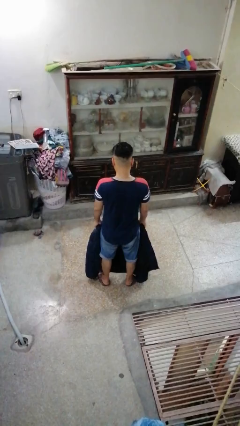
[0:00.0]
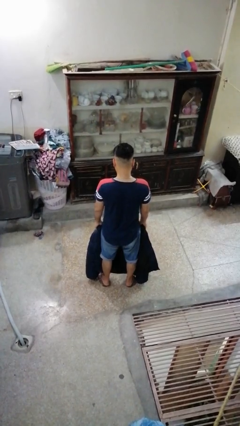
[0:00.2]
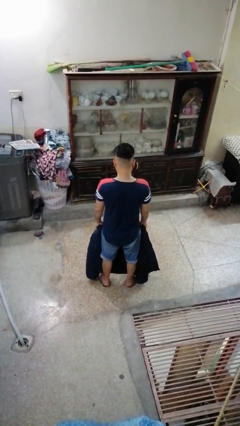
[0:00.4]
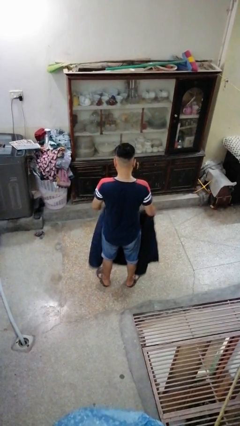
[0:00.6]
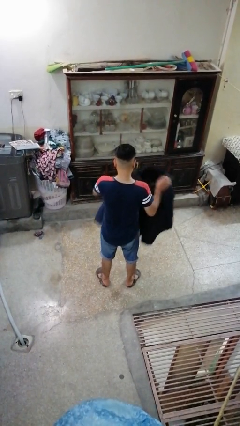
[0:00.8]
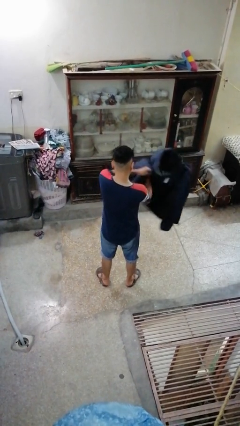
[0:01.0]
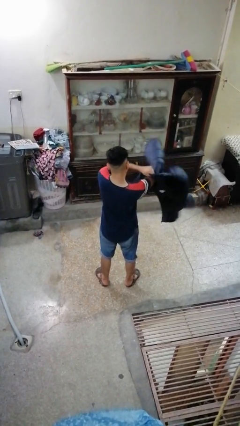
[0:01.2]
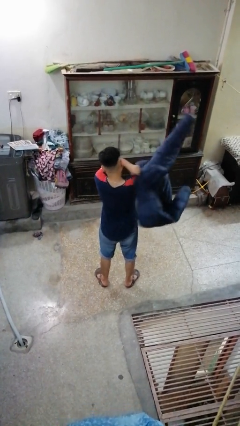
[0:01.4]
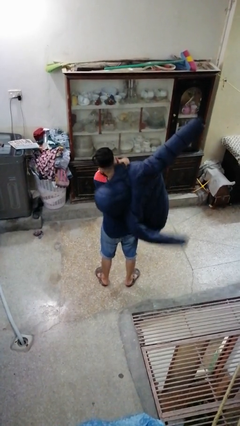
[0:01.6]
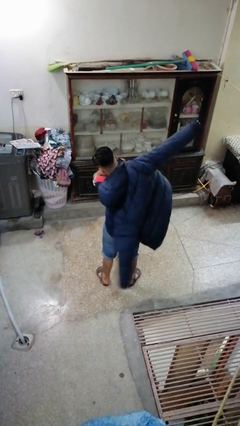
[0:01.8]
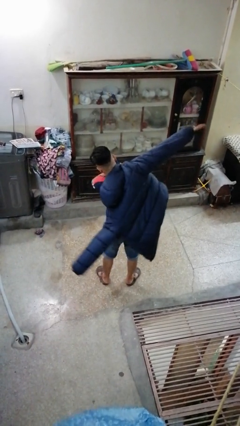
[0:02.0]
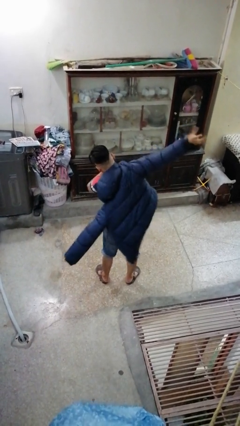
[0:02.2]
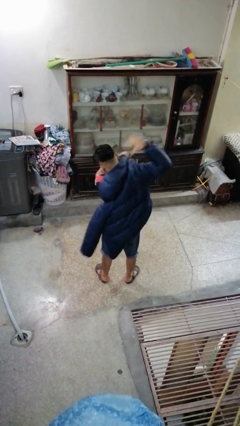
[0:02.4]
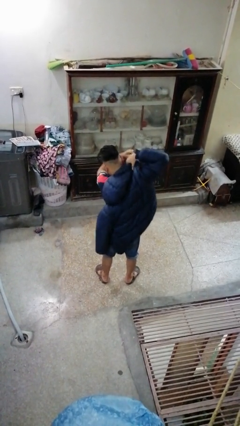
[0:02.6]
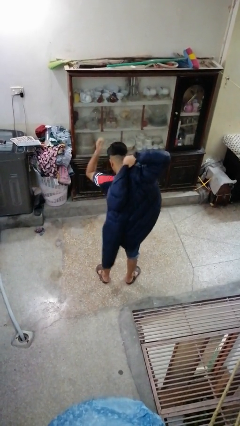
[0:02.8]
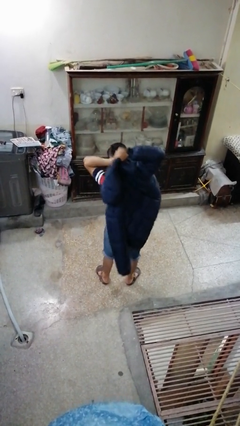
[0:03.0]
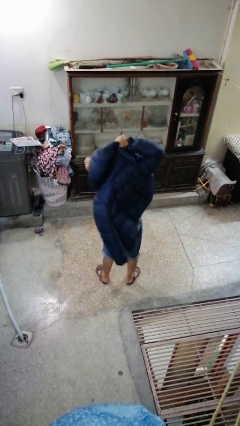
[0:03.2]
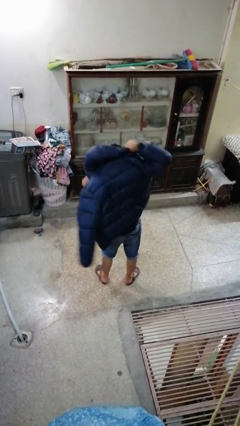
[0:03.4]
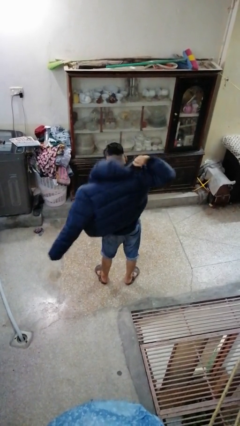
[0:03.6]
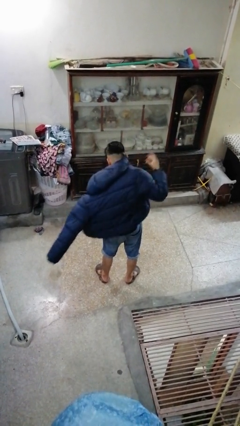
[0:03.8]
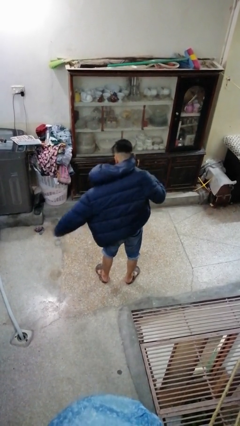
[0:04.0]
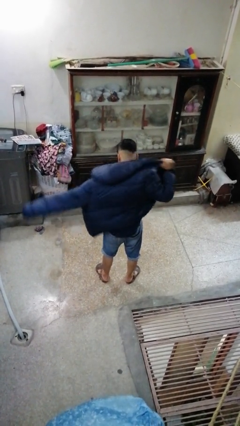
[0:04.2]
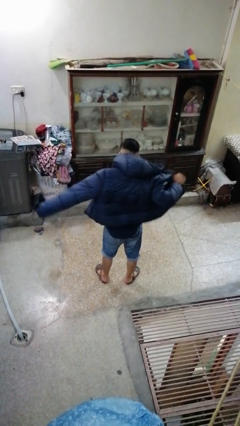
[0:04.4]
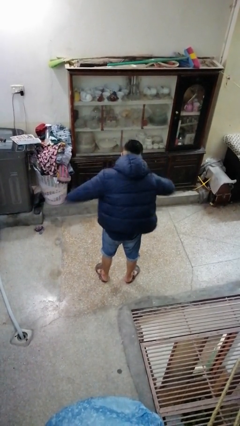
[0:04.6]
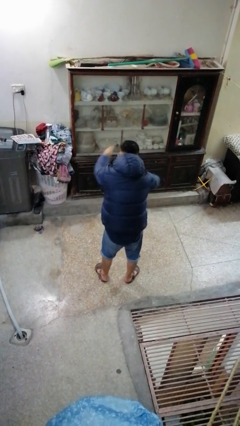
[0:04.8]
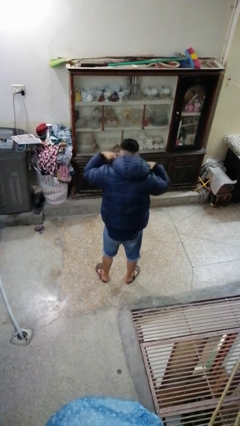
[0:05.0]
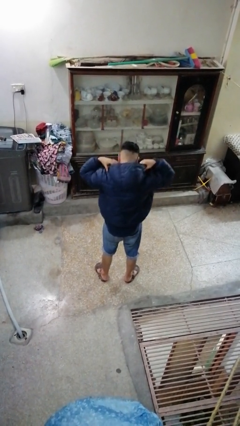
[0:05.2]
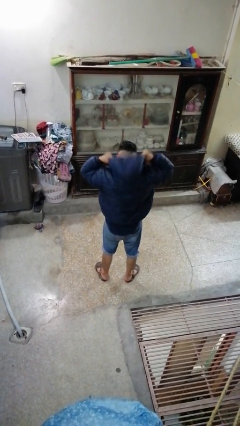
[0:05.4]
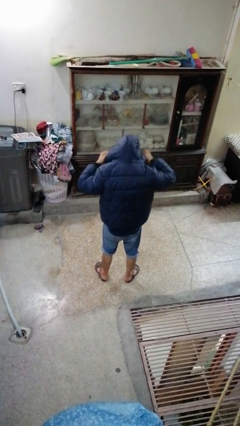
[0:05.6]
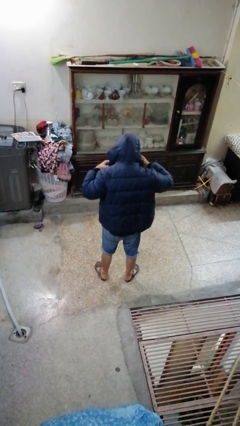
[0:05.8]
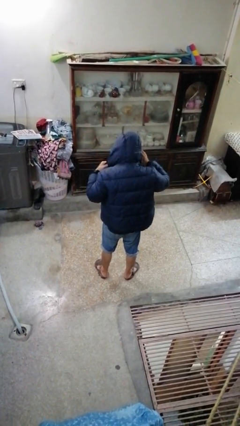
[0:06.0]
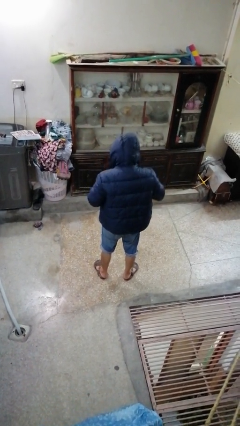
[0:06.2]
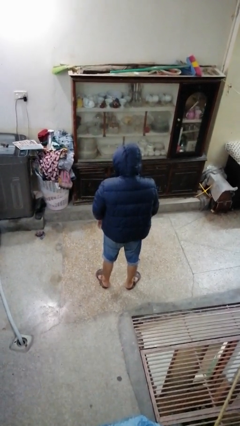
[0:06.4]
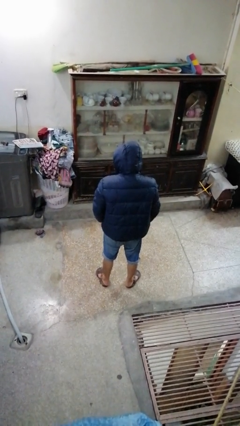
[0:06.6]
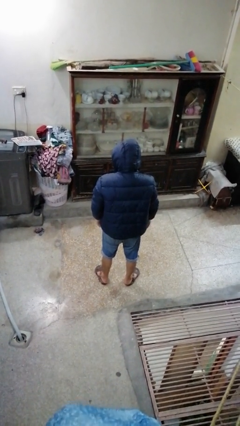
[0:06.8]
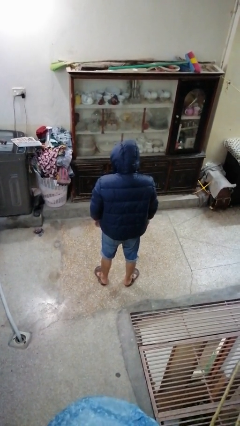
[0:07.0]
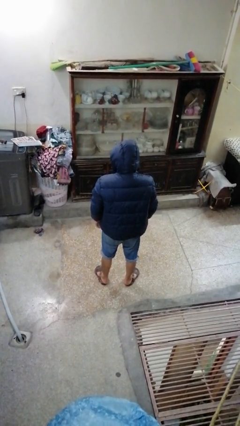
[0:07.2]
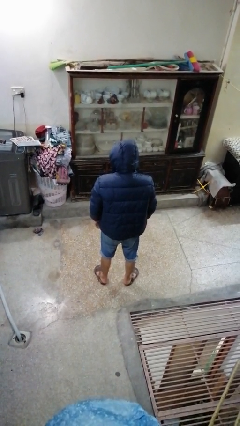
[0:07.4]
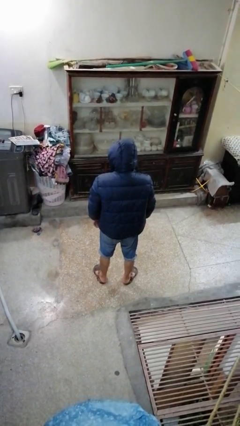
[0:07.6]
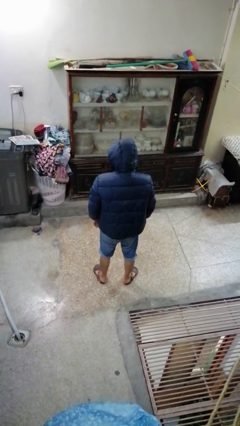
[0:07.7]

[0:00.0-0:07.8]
person puts on hoodie

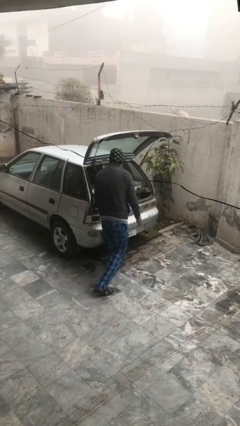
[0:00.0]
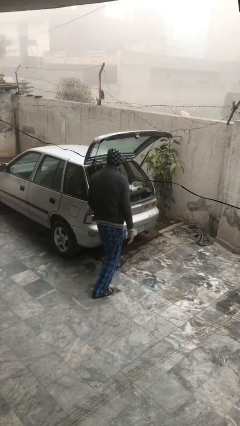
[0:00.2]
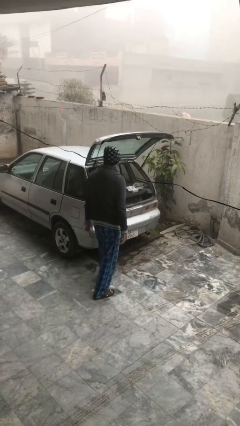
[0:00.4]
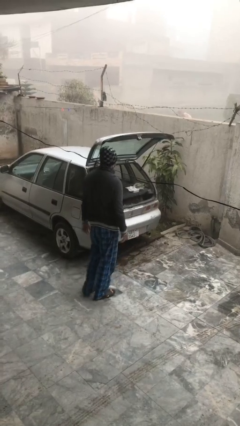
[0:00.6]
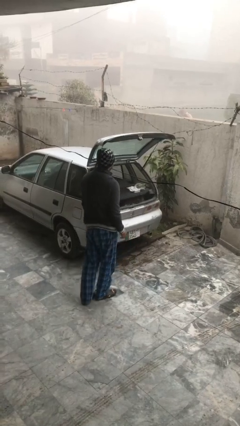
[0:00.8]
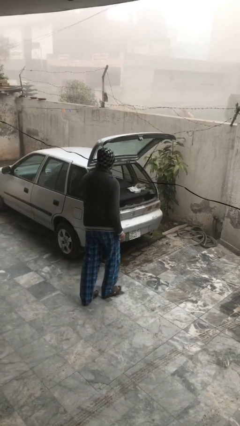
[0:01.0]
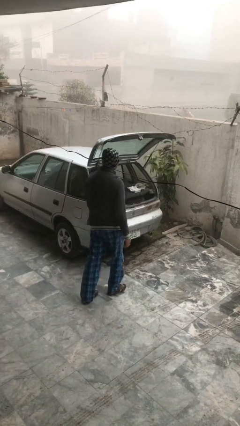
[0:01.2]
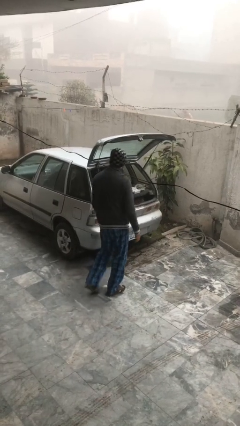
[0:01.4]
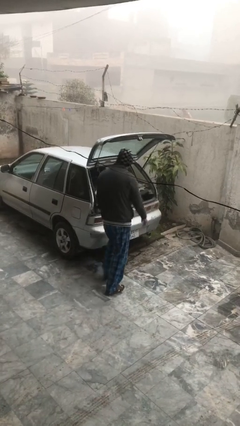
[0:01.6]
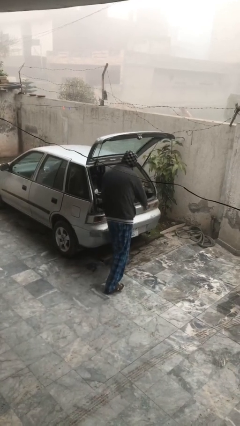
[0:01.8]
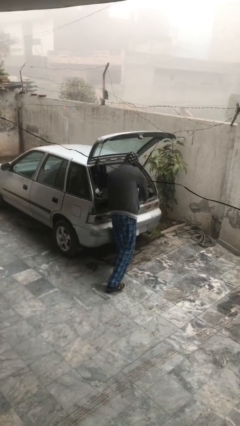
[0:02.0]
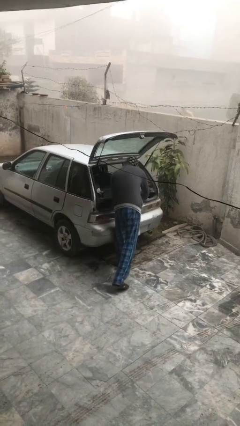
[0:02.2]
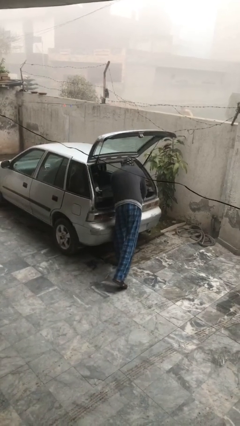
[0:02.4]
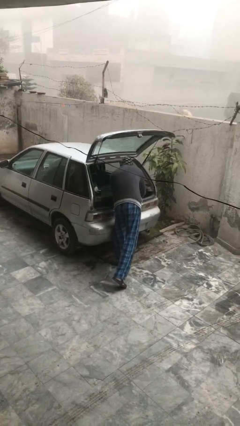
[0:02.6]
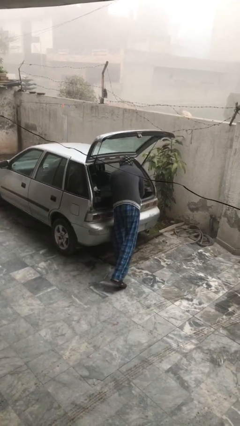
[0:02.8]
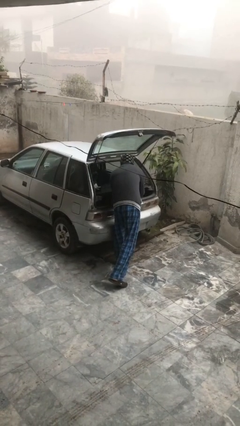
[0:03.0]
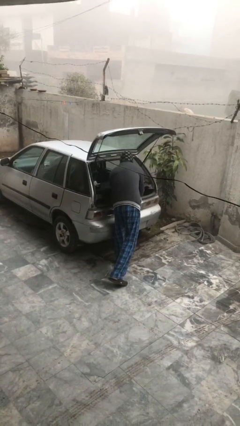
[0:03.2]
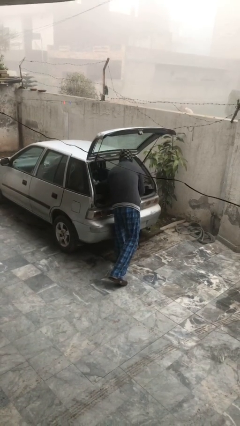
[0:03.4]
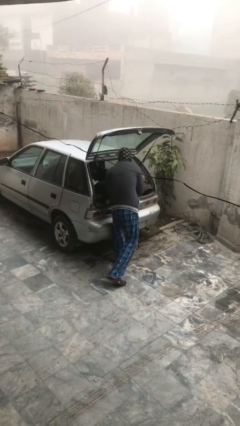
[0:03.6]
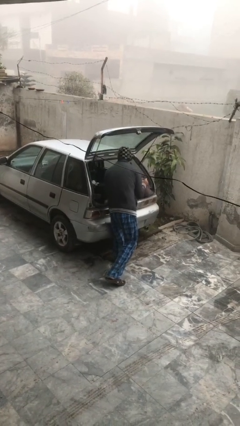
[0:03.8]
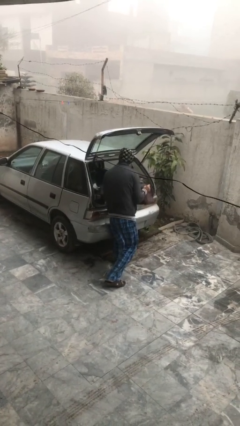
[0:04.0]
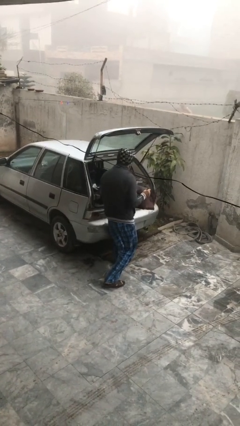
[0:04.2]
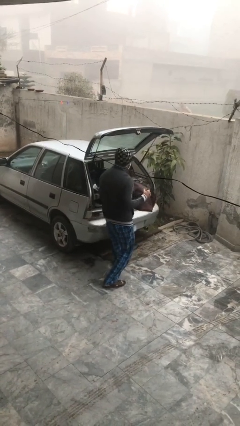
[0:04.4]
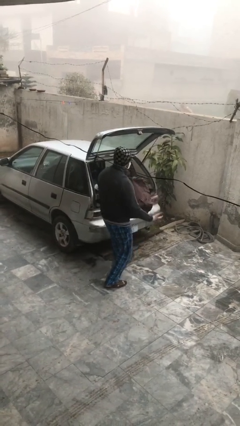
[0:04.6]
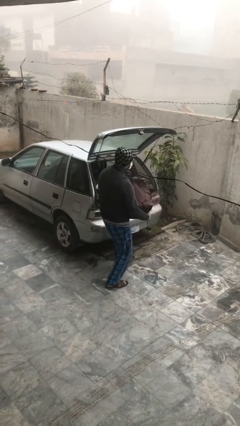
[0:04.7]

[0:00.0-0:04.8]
person unloads car

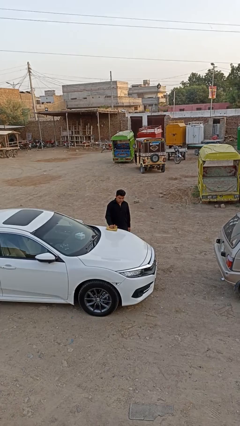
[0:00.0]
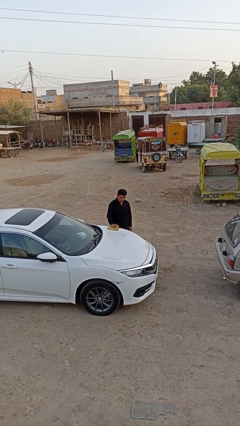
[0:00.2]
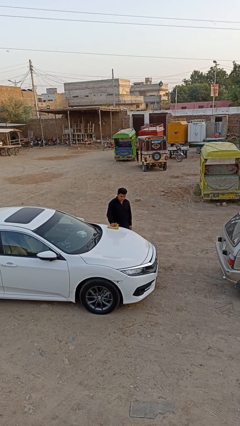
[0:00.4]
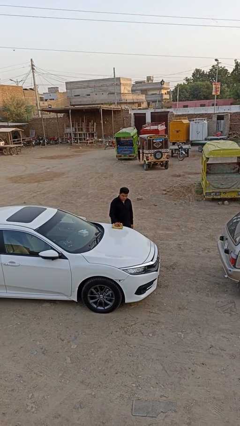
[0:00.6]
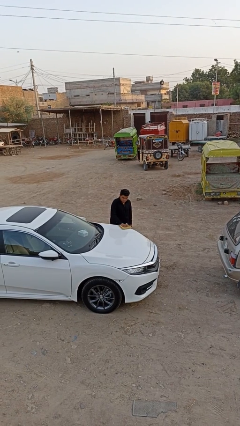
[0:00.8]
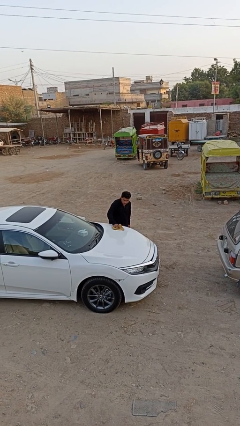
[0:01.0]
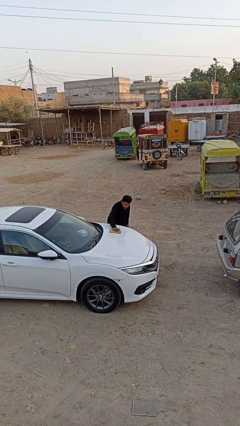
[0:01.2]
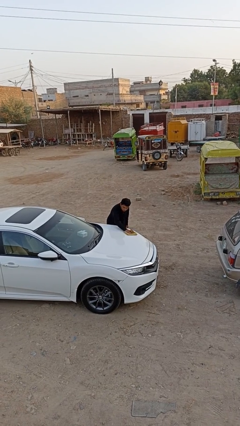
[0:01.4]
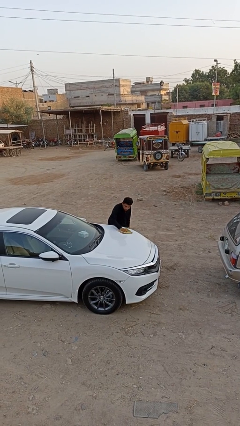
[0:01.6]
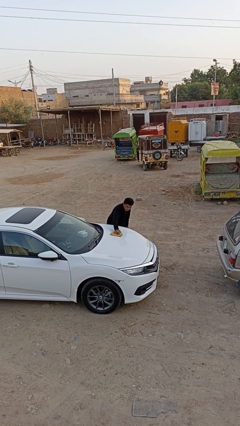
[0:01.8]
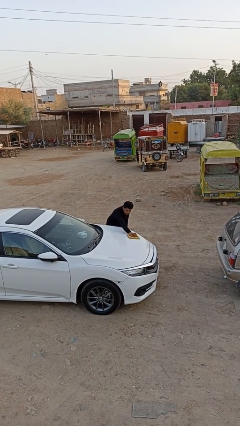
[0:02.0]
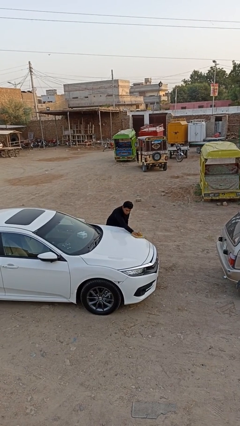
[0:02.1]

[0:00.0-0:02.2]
person polishes car with rag

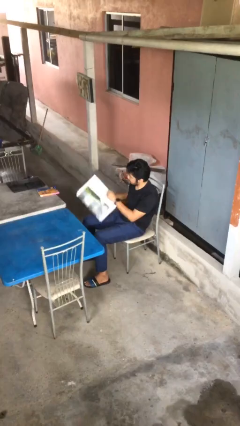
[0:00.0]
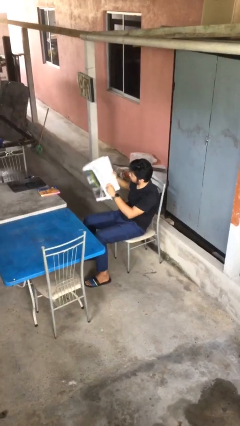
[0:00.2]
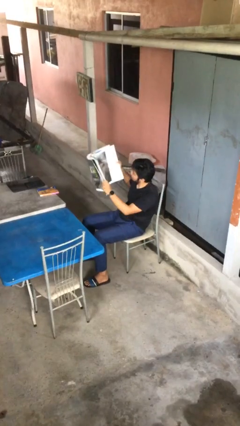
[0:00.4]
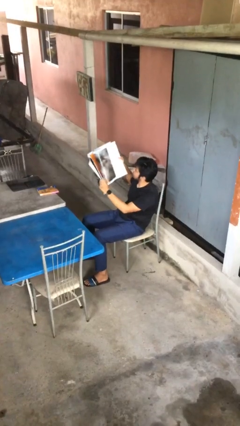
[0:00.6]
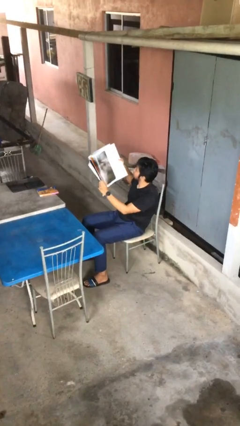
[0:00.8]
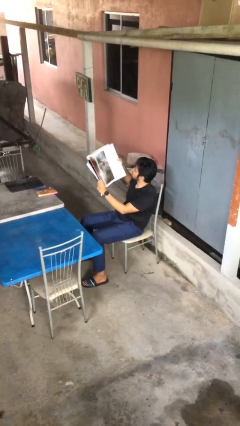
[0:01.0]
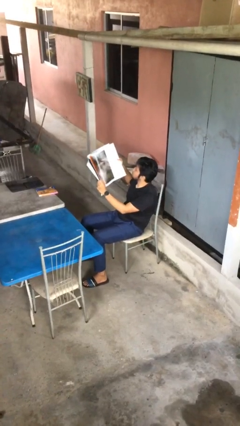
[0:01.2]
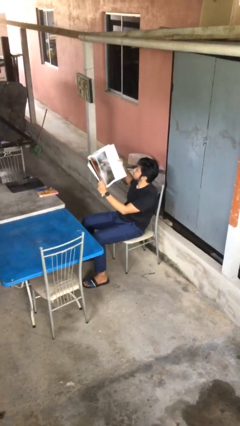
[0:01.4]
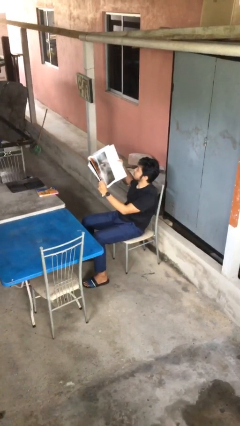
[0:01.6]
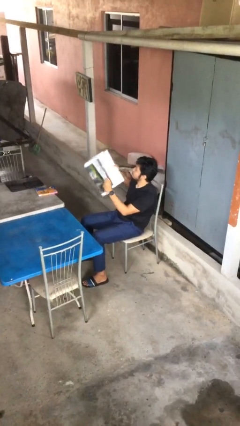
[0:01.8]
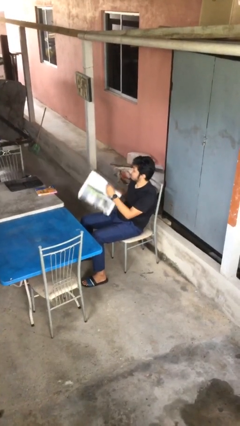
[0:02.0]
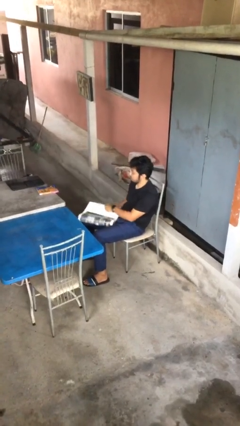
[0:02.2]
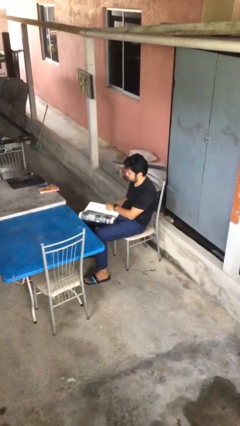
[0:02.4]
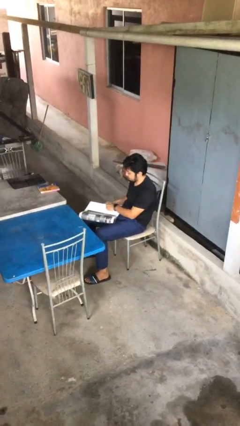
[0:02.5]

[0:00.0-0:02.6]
person reads newspaper

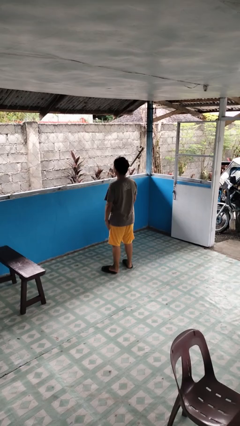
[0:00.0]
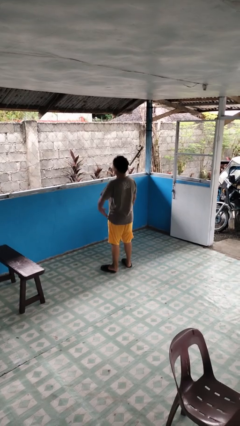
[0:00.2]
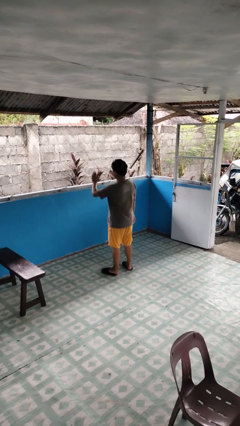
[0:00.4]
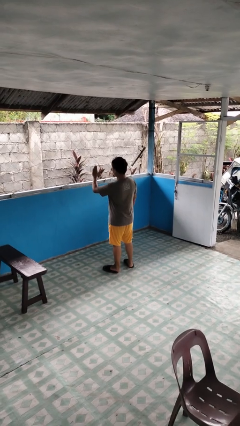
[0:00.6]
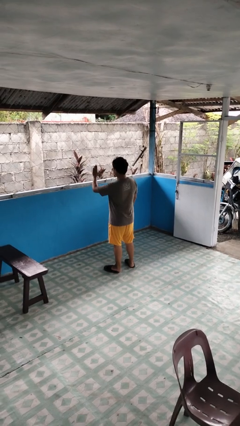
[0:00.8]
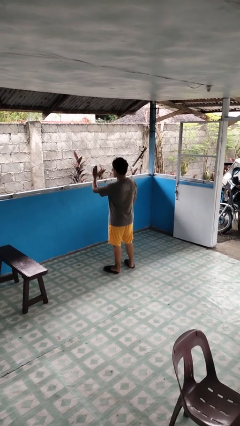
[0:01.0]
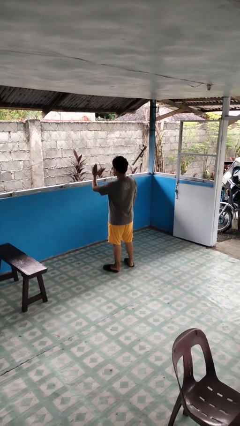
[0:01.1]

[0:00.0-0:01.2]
person gestures stop
